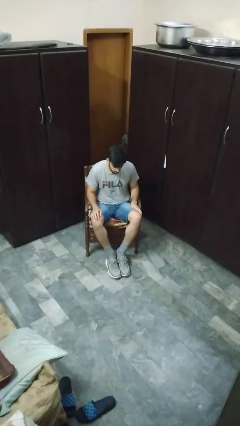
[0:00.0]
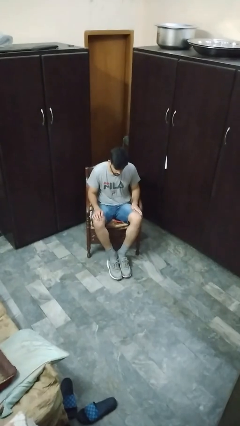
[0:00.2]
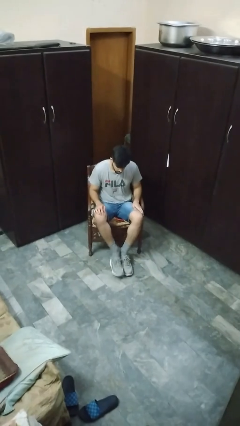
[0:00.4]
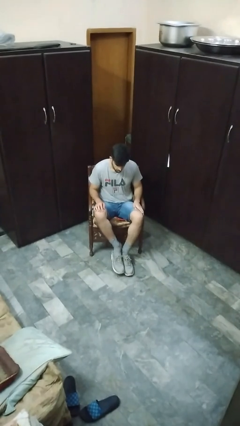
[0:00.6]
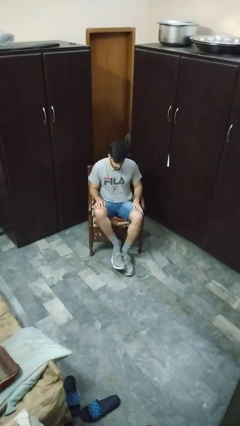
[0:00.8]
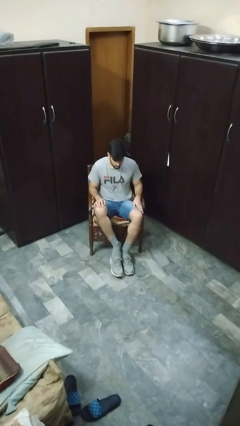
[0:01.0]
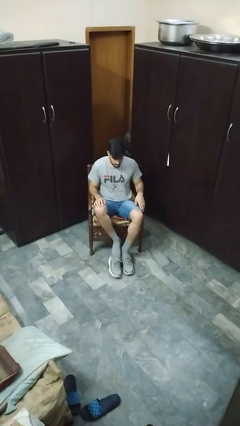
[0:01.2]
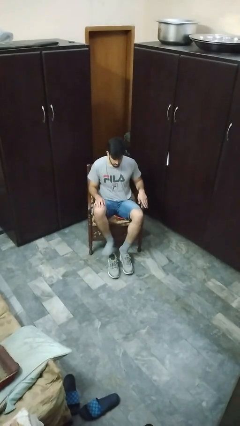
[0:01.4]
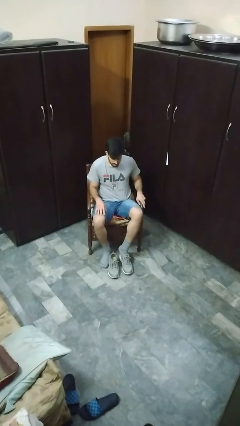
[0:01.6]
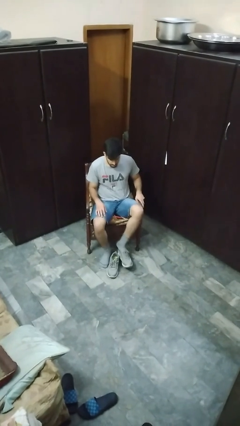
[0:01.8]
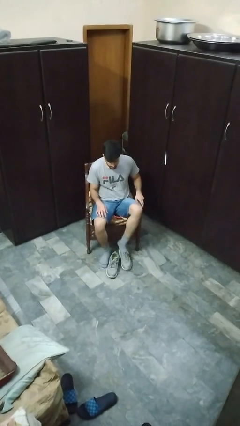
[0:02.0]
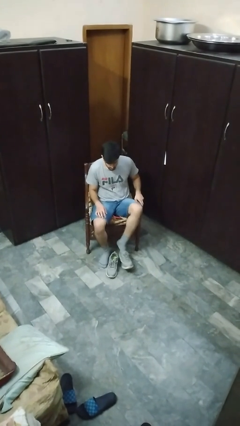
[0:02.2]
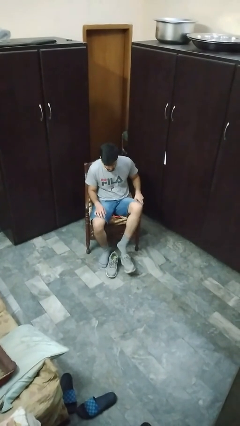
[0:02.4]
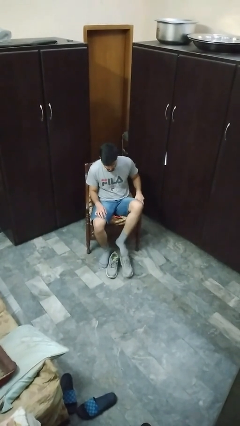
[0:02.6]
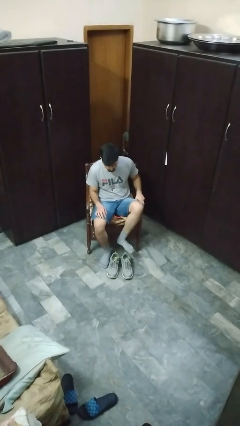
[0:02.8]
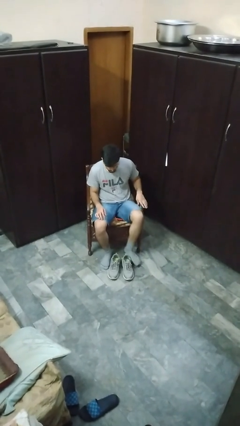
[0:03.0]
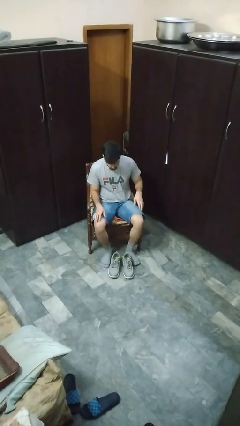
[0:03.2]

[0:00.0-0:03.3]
person takes off shoes

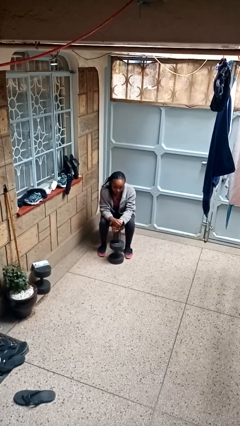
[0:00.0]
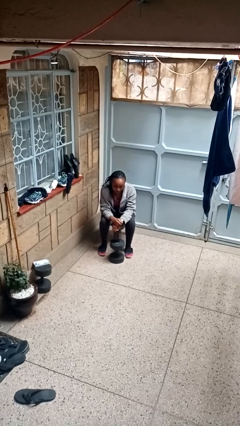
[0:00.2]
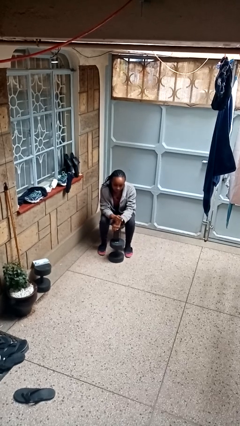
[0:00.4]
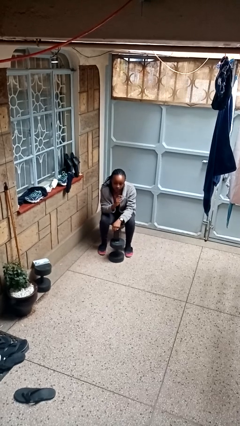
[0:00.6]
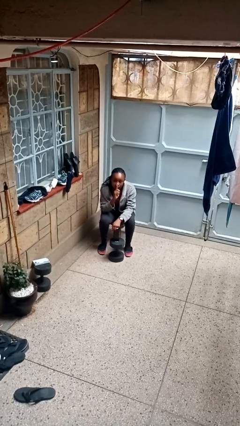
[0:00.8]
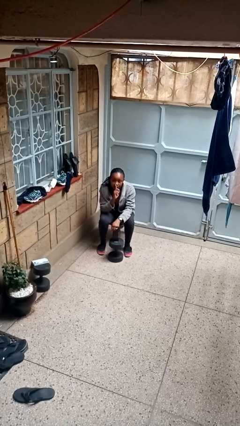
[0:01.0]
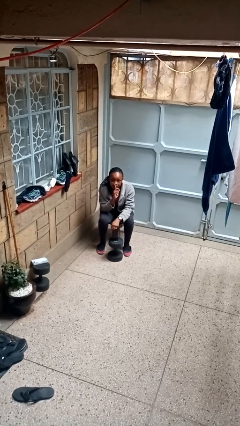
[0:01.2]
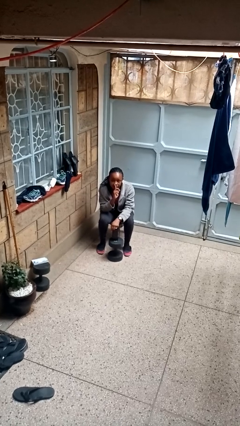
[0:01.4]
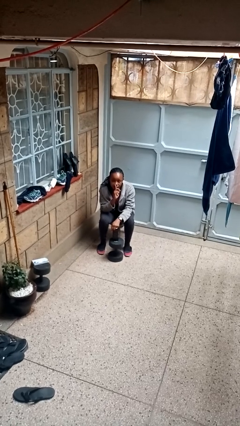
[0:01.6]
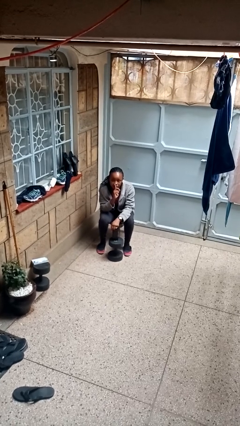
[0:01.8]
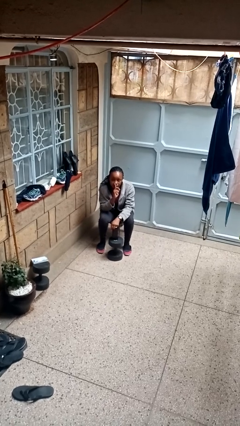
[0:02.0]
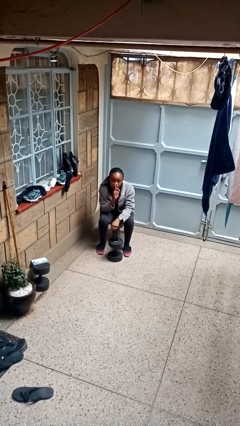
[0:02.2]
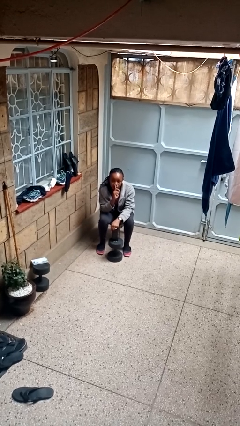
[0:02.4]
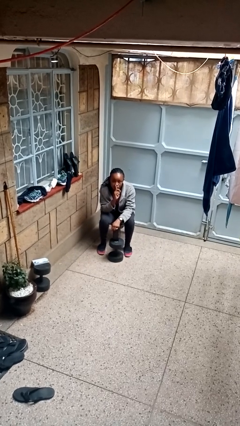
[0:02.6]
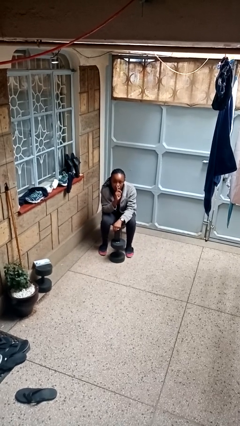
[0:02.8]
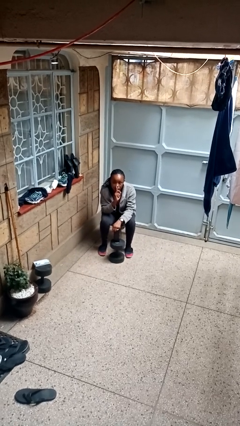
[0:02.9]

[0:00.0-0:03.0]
person gestures be quiet

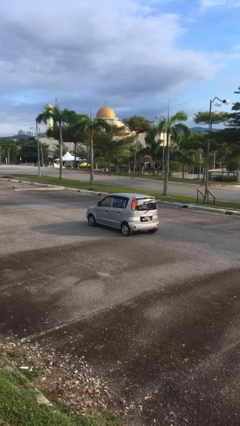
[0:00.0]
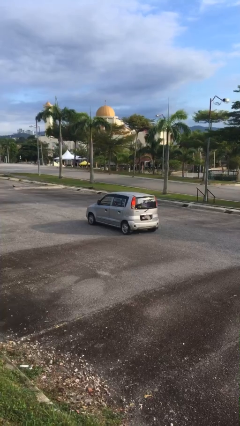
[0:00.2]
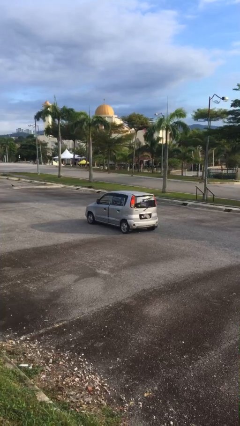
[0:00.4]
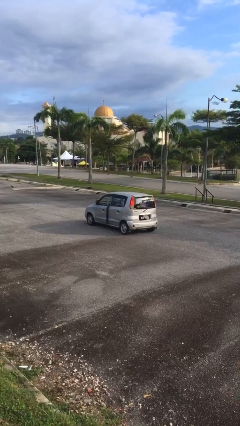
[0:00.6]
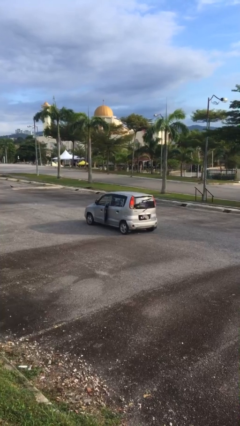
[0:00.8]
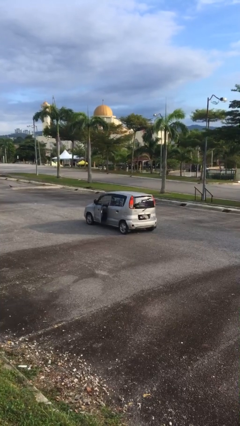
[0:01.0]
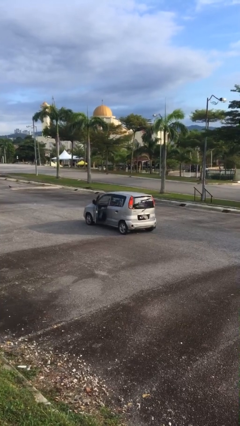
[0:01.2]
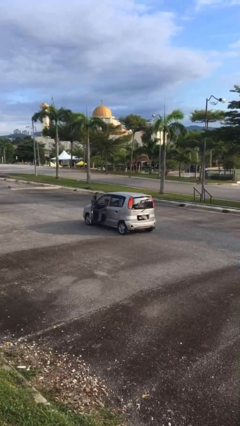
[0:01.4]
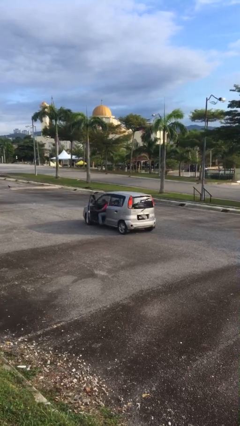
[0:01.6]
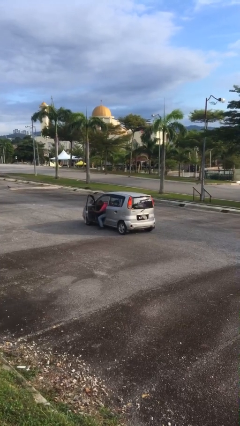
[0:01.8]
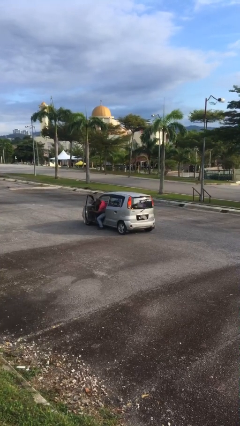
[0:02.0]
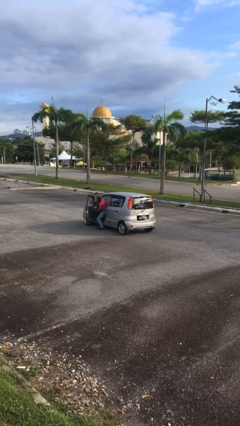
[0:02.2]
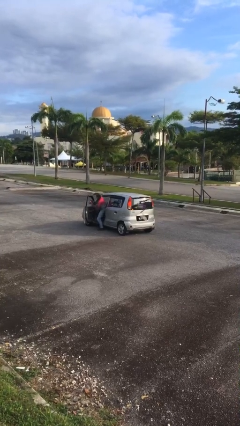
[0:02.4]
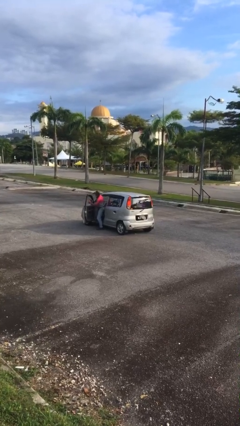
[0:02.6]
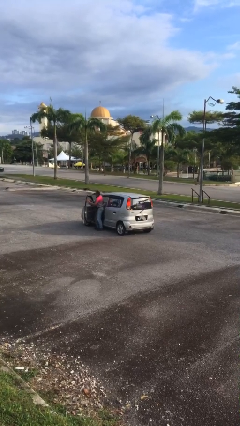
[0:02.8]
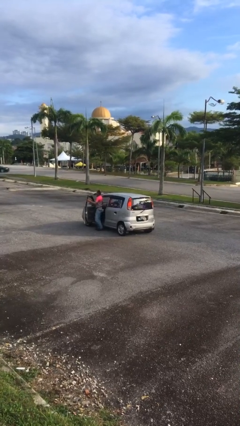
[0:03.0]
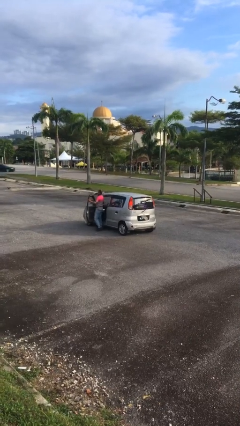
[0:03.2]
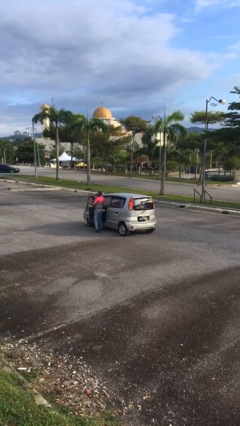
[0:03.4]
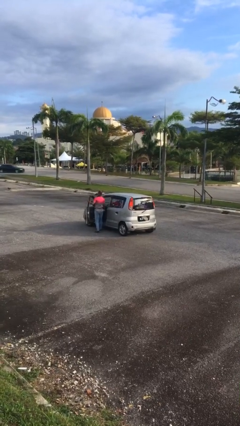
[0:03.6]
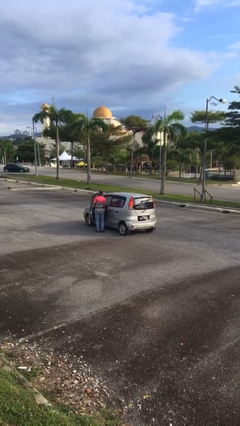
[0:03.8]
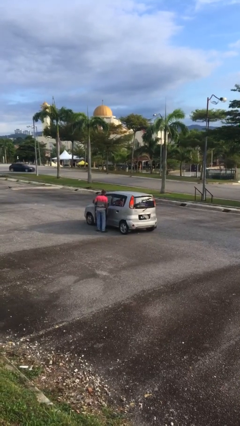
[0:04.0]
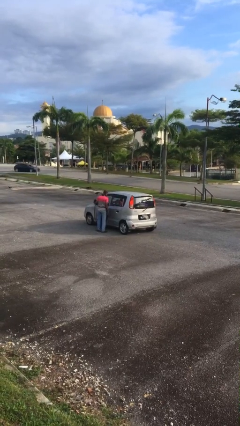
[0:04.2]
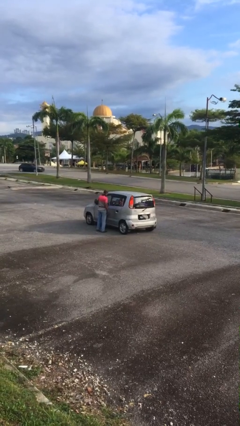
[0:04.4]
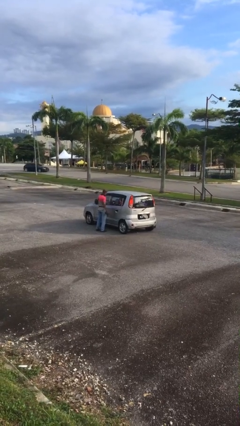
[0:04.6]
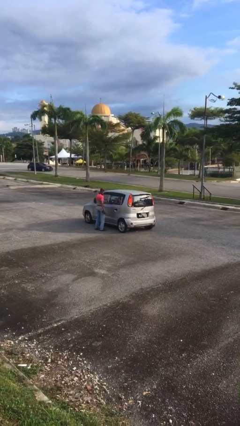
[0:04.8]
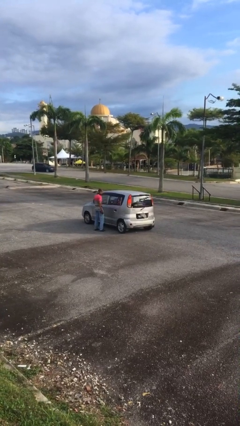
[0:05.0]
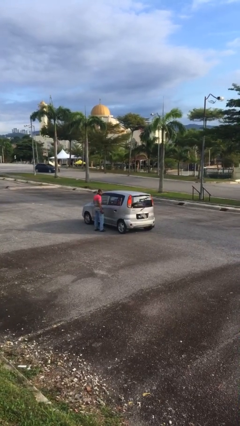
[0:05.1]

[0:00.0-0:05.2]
car drops off person

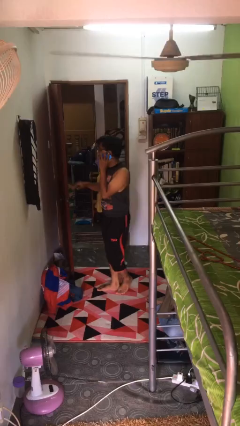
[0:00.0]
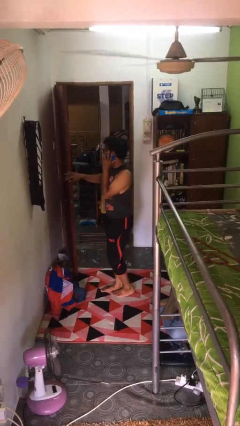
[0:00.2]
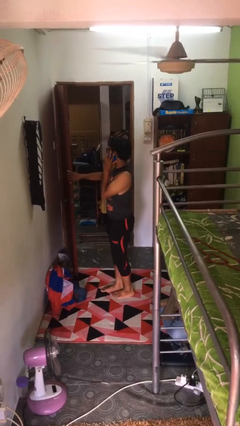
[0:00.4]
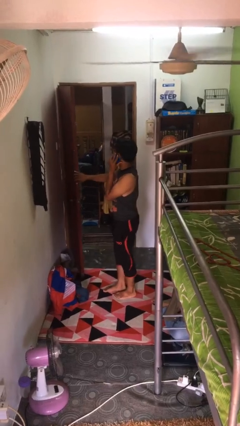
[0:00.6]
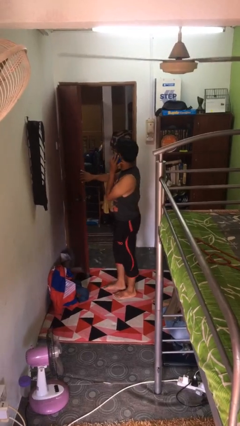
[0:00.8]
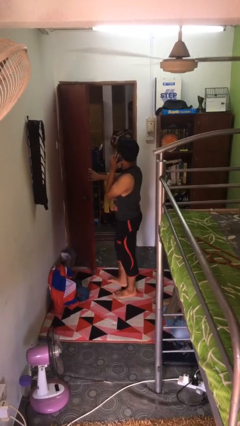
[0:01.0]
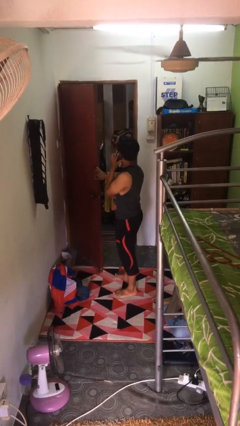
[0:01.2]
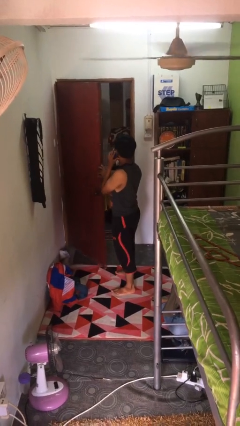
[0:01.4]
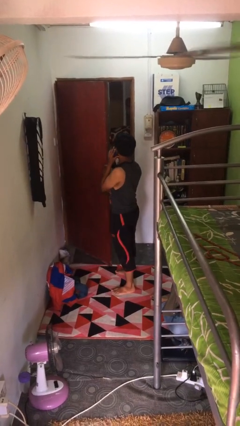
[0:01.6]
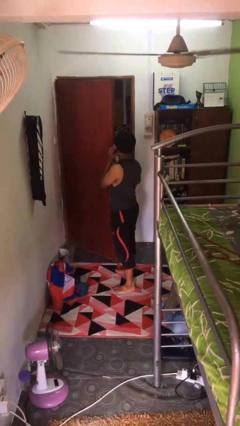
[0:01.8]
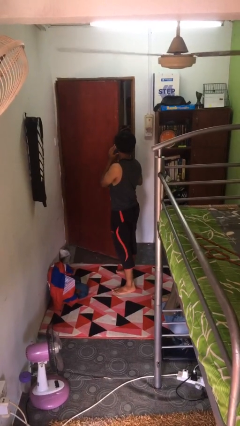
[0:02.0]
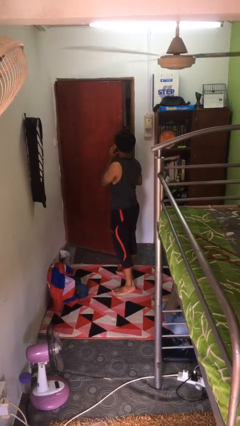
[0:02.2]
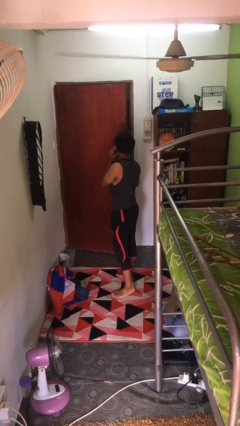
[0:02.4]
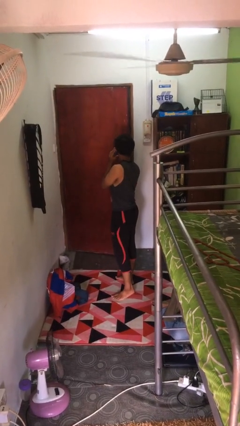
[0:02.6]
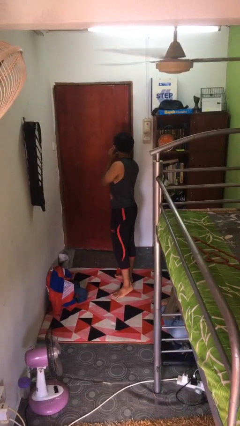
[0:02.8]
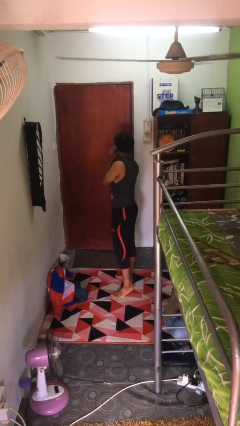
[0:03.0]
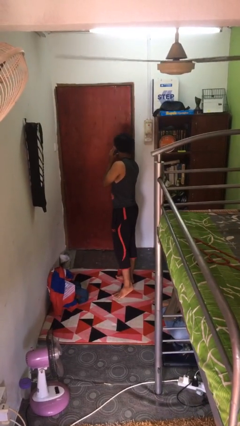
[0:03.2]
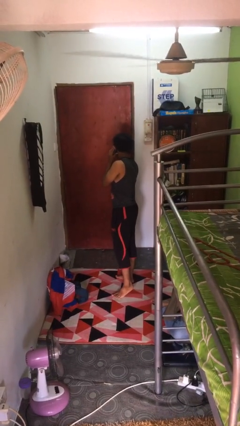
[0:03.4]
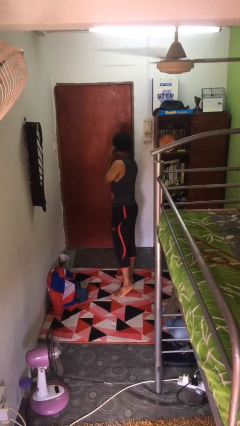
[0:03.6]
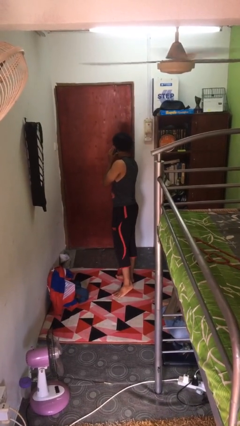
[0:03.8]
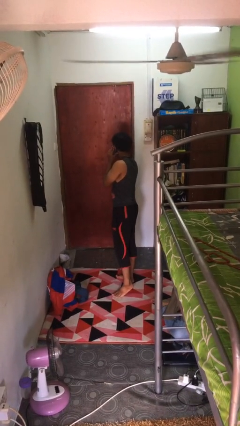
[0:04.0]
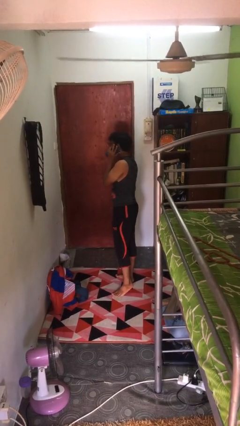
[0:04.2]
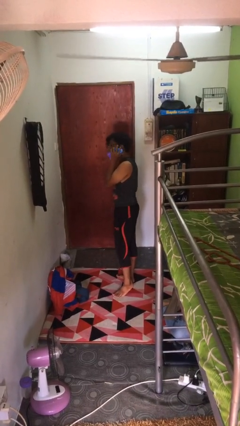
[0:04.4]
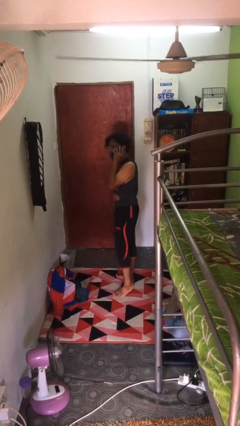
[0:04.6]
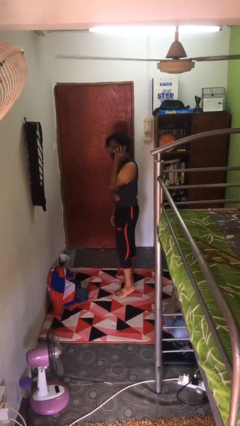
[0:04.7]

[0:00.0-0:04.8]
person closes facility door

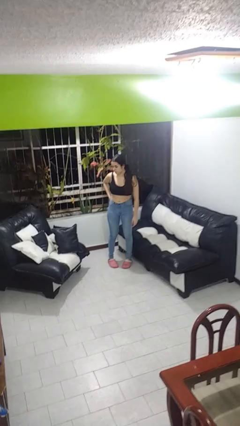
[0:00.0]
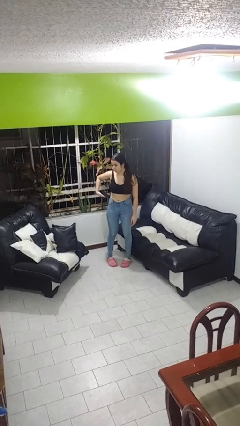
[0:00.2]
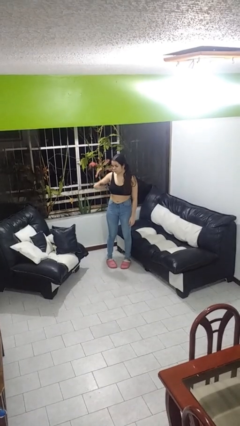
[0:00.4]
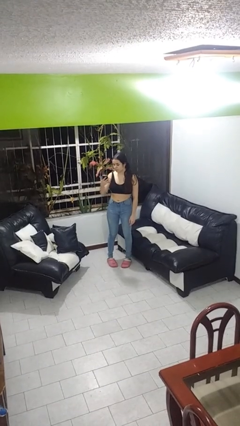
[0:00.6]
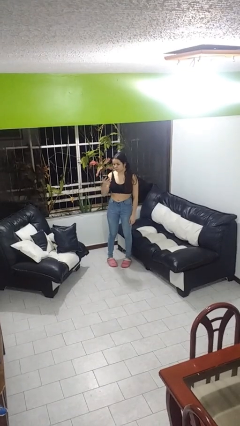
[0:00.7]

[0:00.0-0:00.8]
person takes phone from pocket

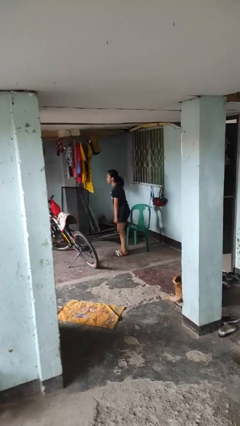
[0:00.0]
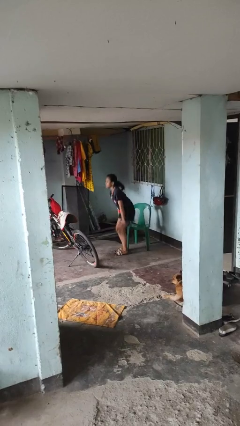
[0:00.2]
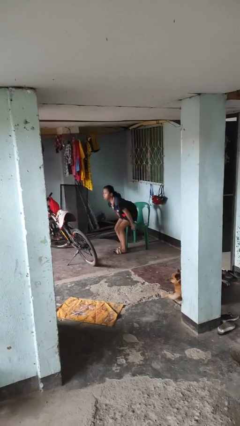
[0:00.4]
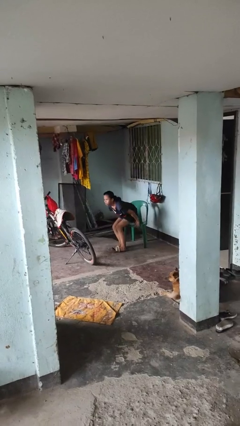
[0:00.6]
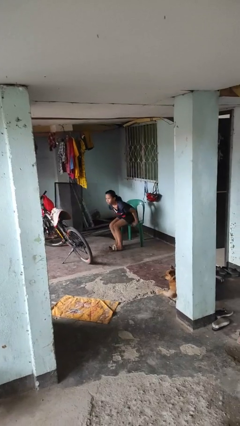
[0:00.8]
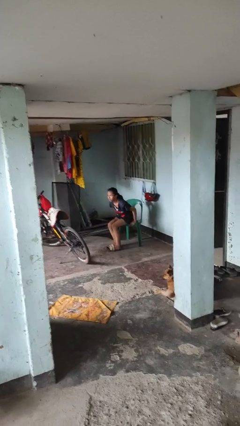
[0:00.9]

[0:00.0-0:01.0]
person sits down
